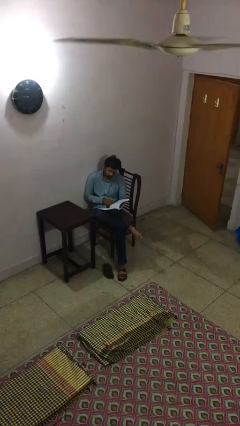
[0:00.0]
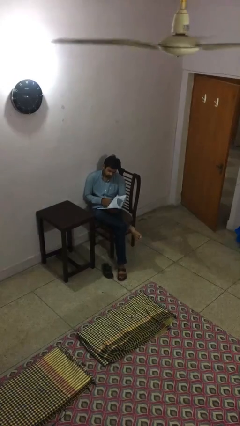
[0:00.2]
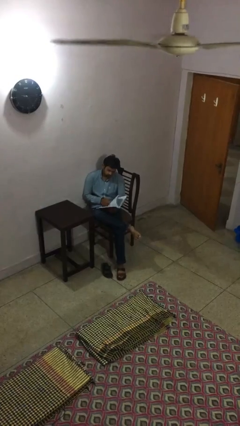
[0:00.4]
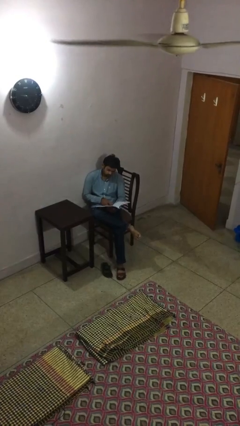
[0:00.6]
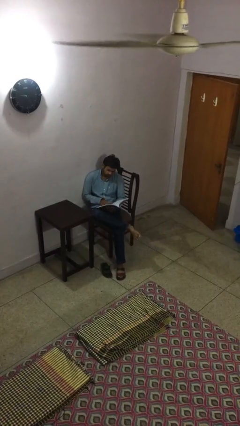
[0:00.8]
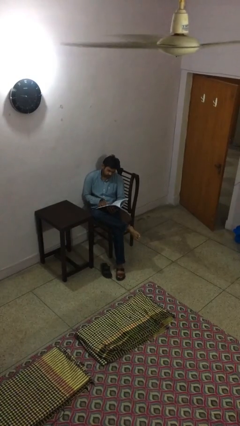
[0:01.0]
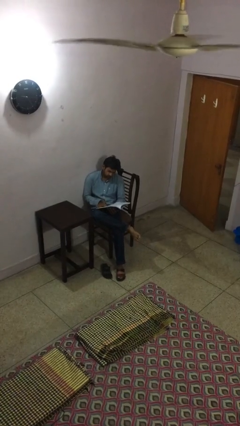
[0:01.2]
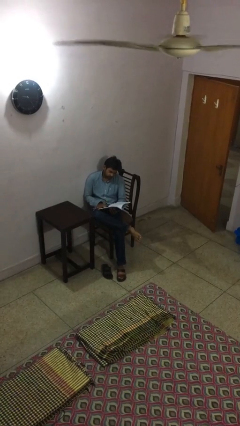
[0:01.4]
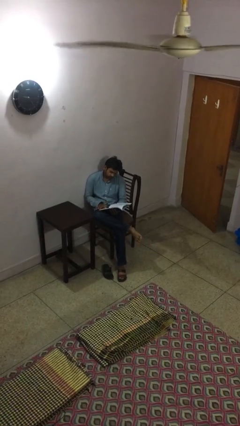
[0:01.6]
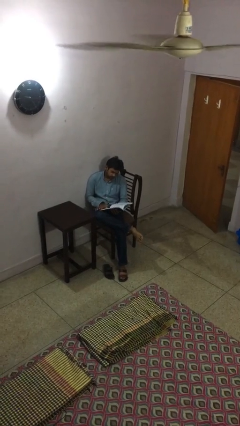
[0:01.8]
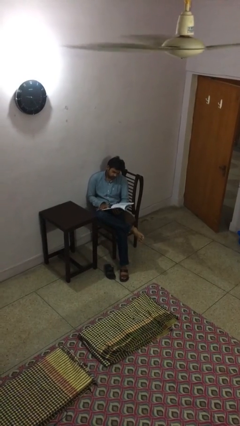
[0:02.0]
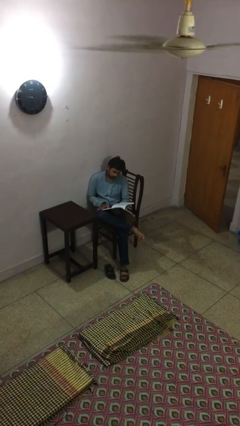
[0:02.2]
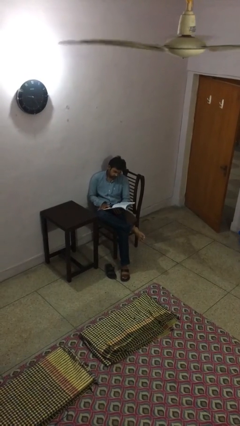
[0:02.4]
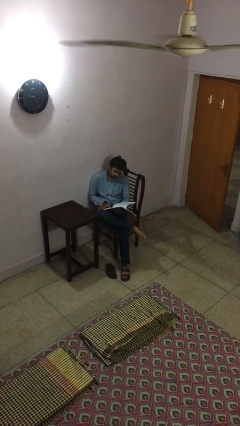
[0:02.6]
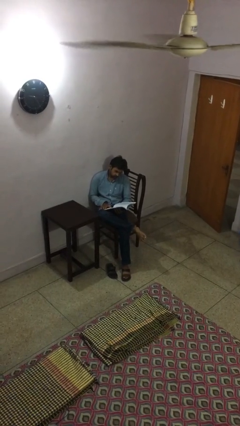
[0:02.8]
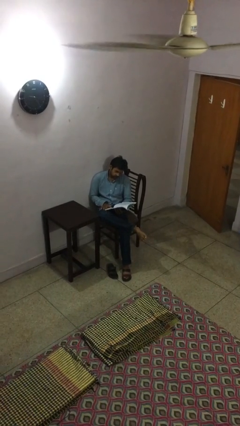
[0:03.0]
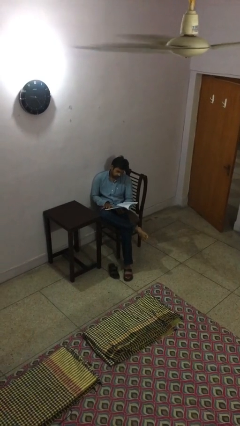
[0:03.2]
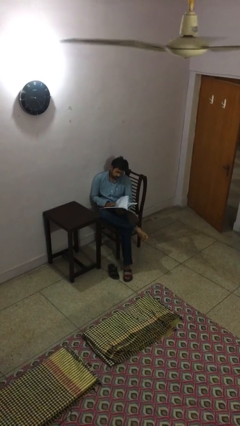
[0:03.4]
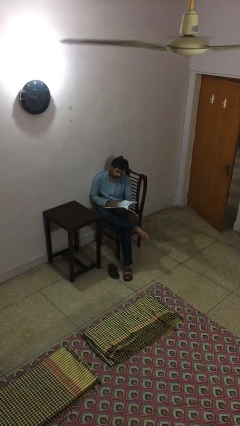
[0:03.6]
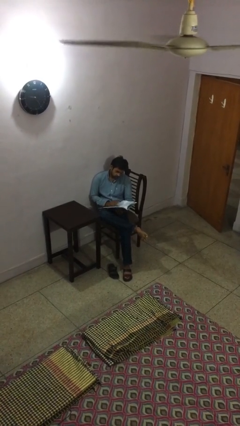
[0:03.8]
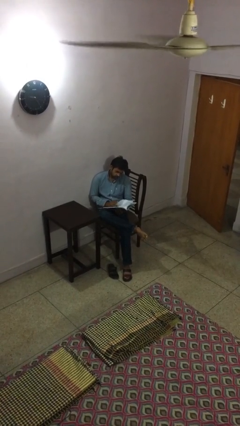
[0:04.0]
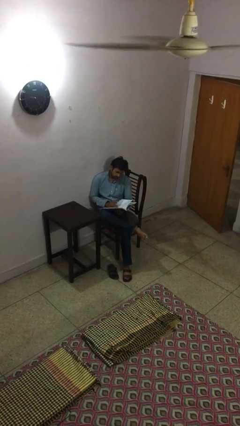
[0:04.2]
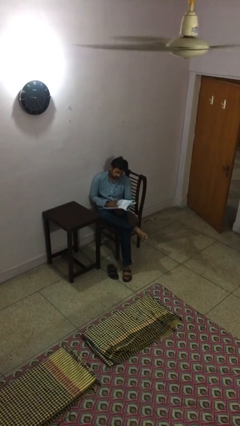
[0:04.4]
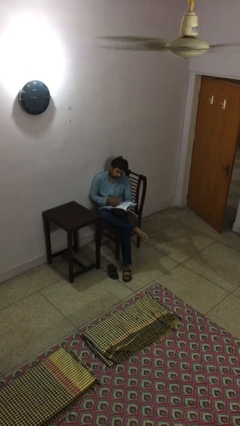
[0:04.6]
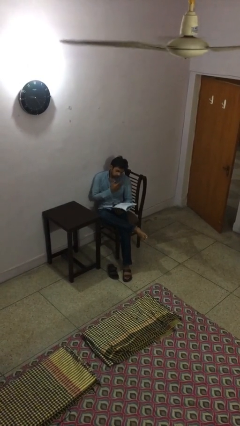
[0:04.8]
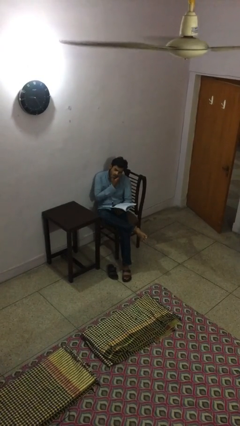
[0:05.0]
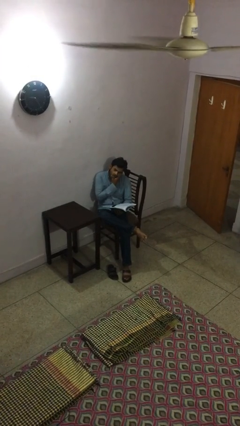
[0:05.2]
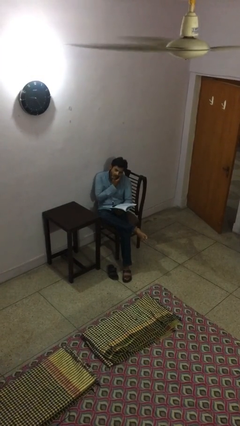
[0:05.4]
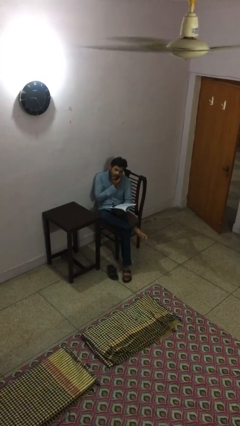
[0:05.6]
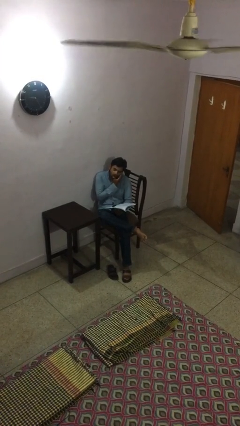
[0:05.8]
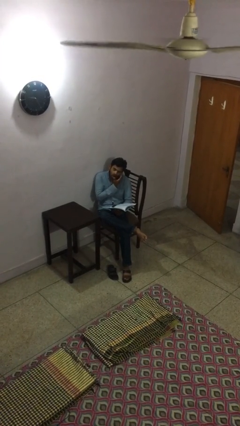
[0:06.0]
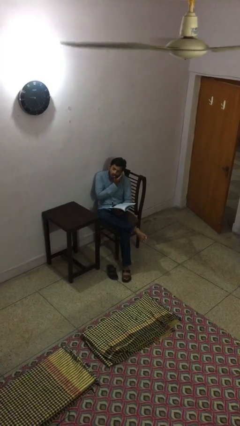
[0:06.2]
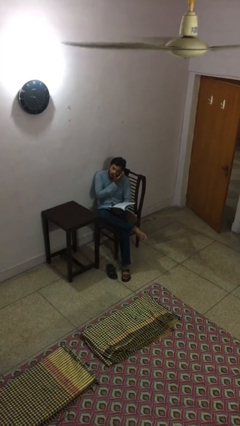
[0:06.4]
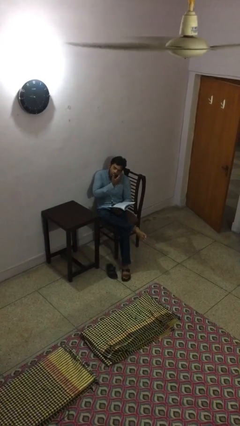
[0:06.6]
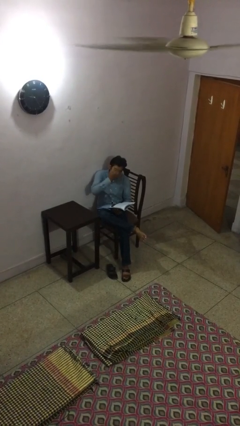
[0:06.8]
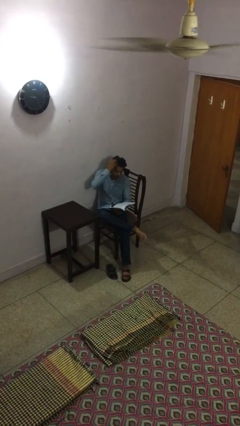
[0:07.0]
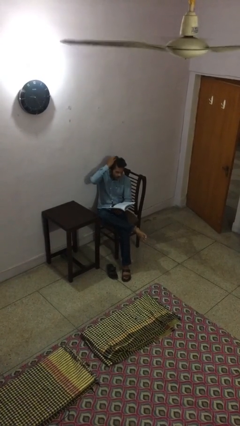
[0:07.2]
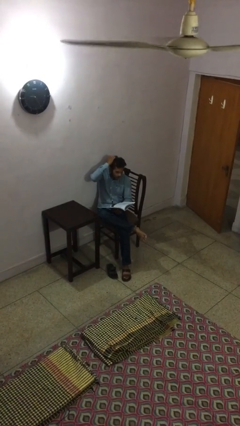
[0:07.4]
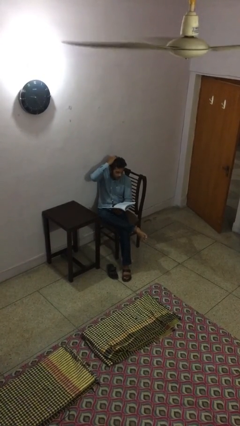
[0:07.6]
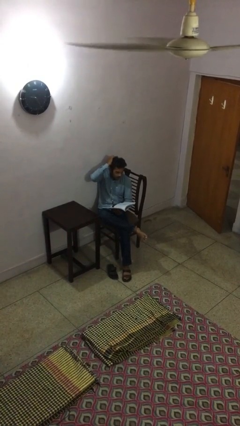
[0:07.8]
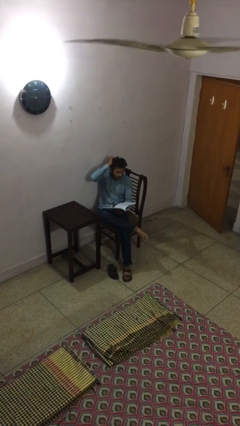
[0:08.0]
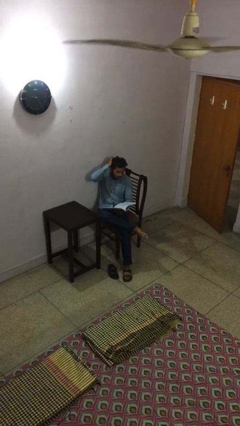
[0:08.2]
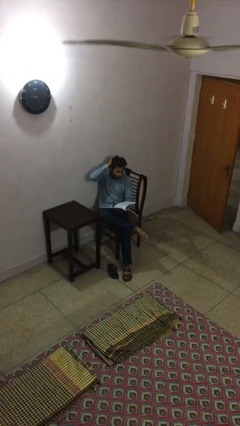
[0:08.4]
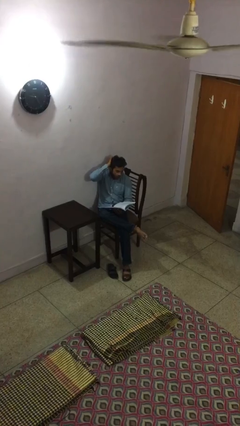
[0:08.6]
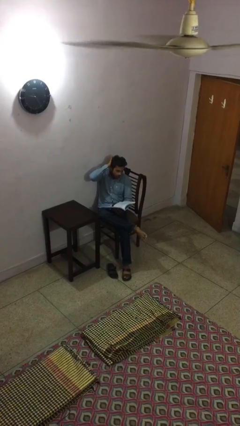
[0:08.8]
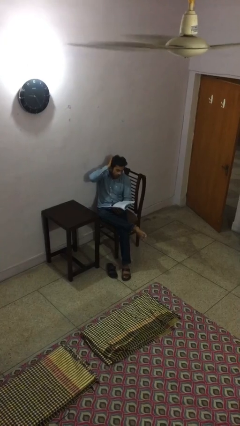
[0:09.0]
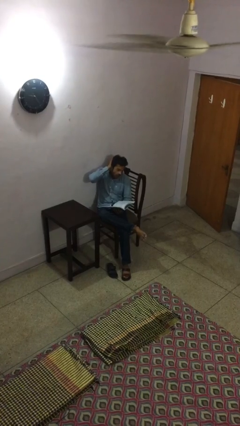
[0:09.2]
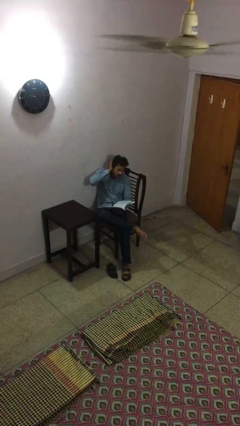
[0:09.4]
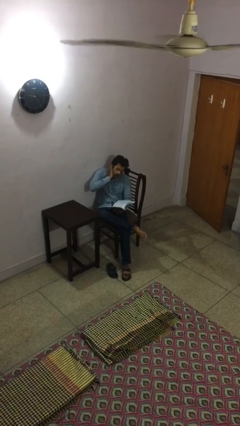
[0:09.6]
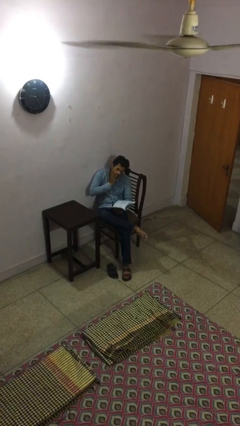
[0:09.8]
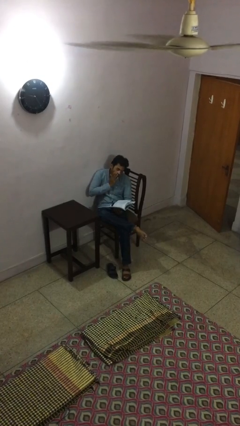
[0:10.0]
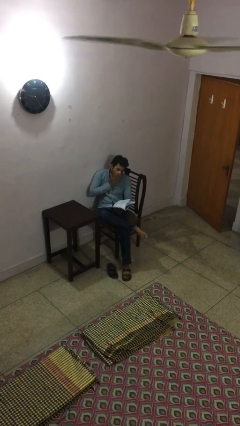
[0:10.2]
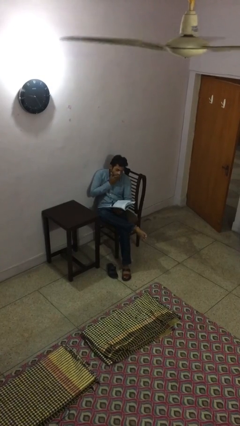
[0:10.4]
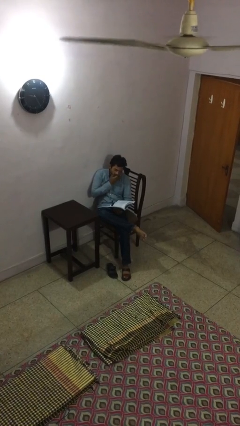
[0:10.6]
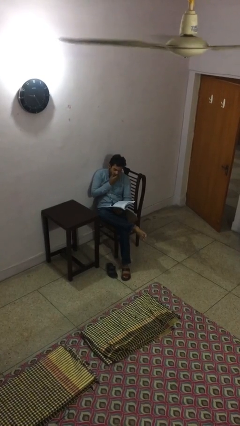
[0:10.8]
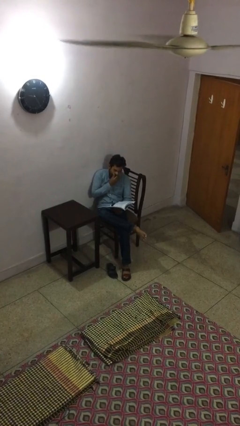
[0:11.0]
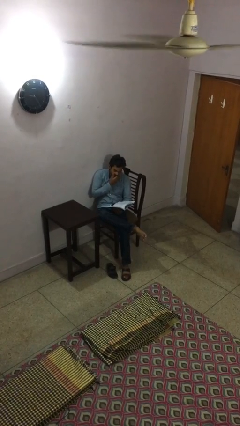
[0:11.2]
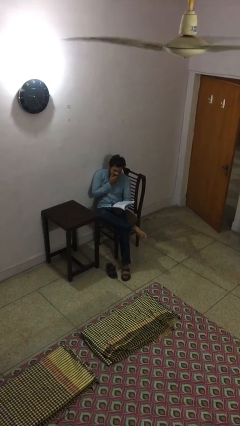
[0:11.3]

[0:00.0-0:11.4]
person reads document

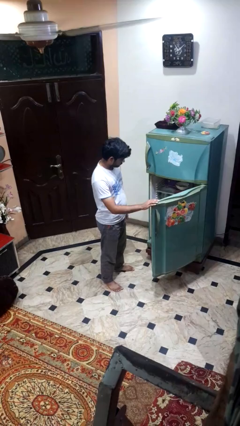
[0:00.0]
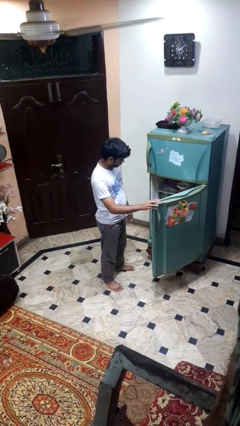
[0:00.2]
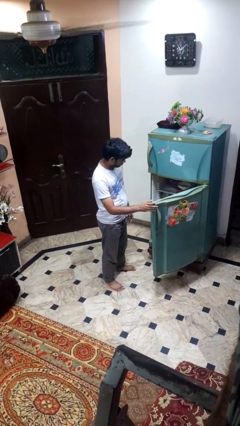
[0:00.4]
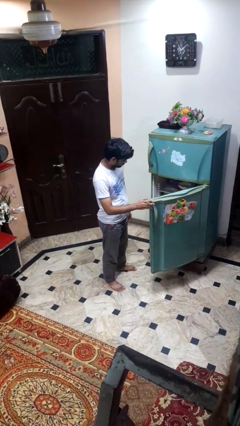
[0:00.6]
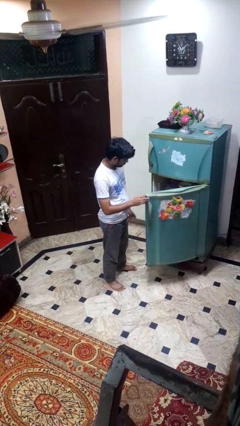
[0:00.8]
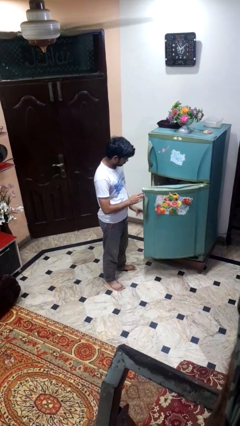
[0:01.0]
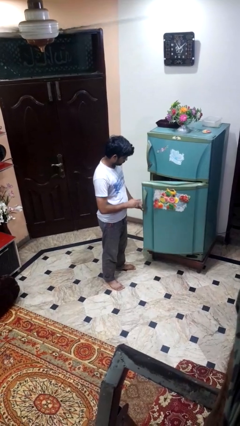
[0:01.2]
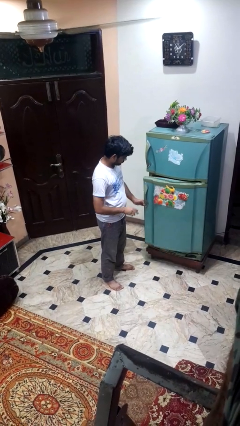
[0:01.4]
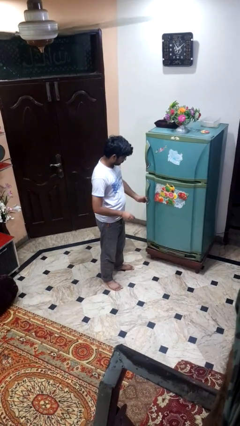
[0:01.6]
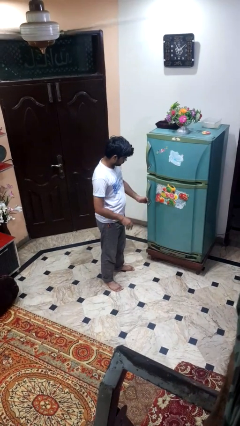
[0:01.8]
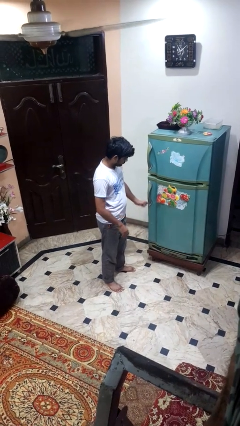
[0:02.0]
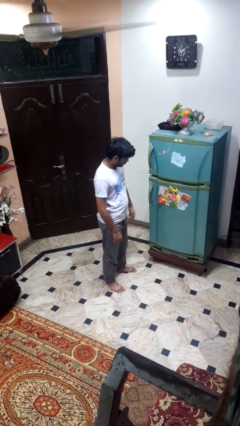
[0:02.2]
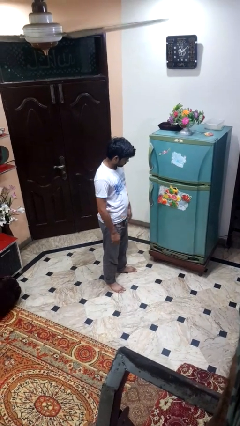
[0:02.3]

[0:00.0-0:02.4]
person closes refrigerator

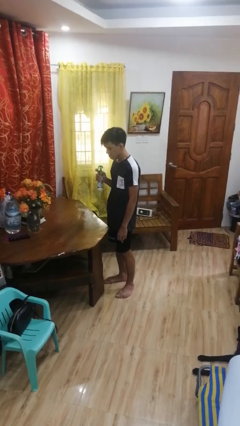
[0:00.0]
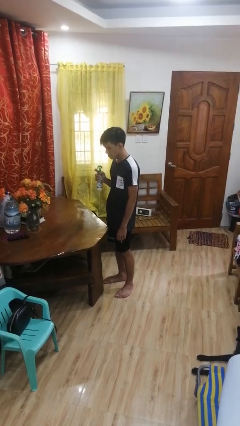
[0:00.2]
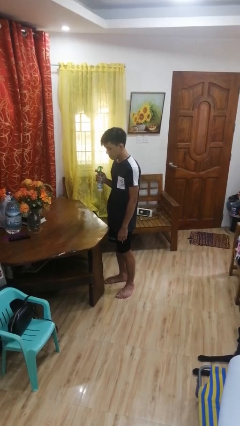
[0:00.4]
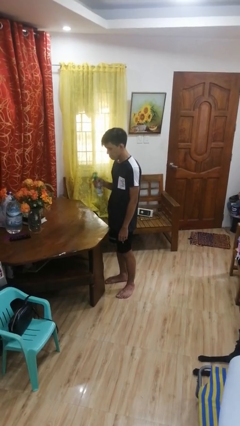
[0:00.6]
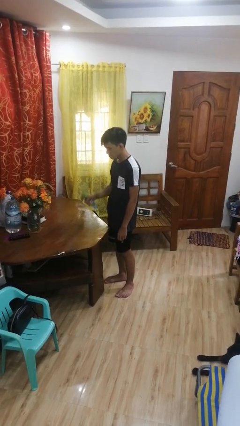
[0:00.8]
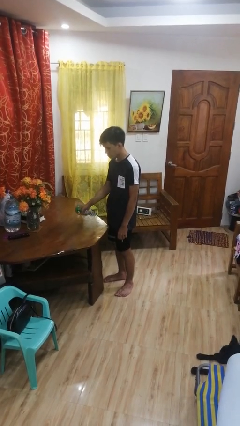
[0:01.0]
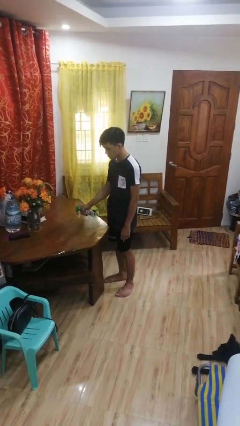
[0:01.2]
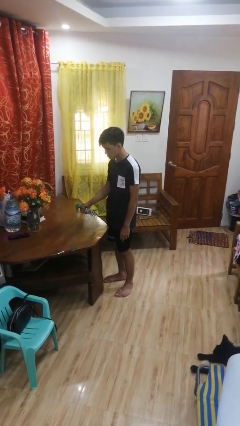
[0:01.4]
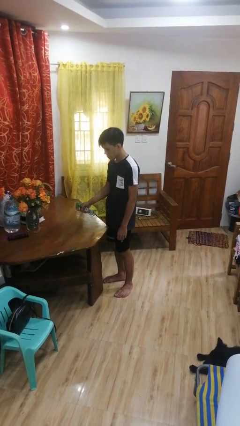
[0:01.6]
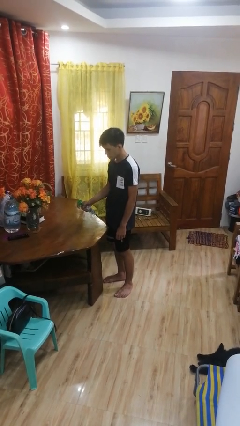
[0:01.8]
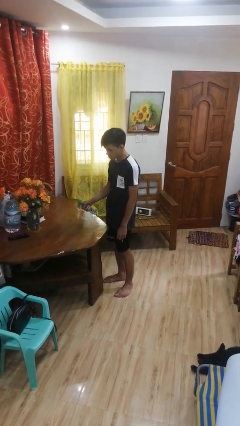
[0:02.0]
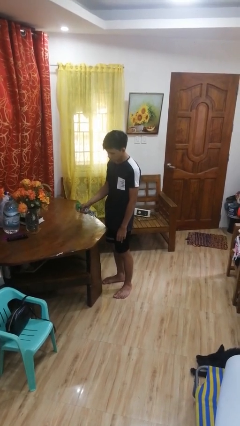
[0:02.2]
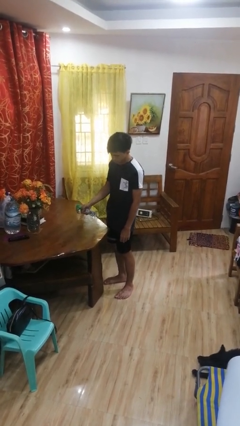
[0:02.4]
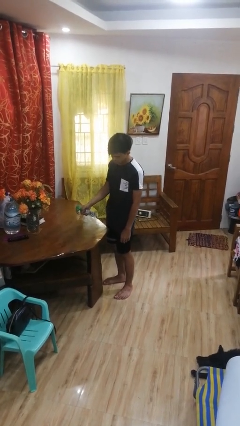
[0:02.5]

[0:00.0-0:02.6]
person sprays from bottle

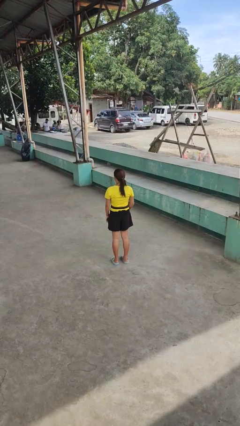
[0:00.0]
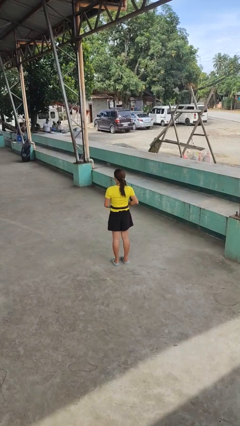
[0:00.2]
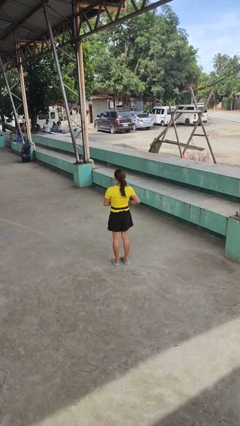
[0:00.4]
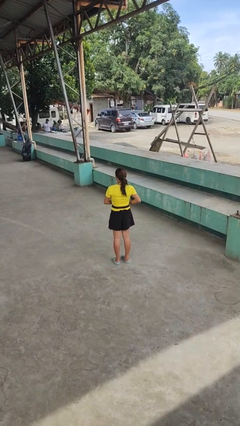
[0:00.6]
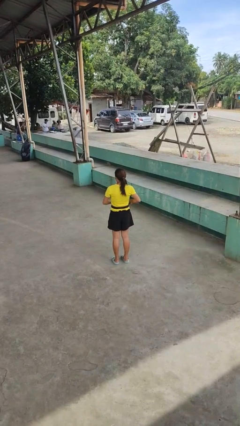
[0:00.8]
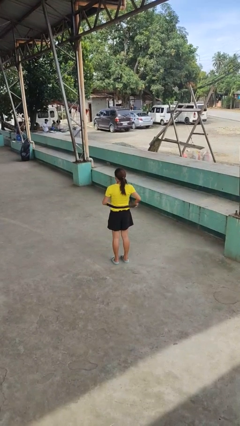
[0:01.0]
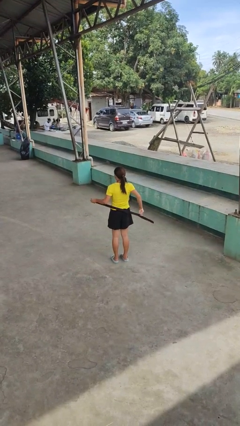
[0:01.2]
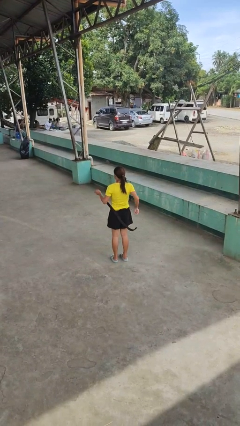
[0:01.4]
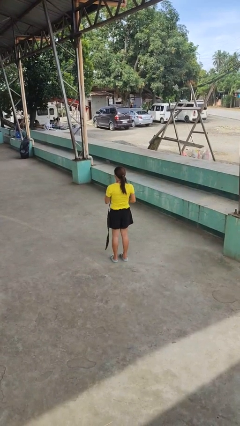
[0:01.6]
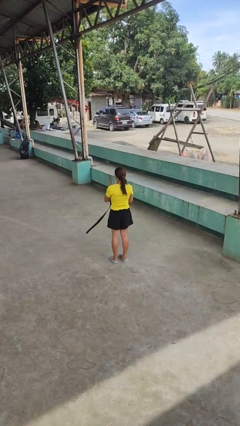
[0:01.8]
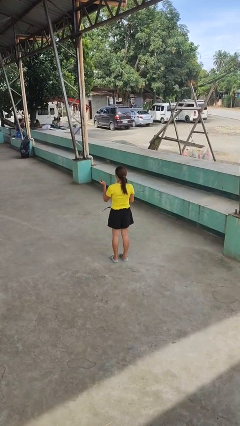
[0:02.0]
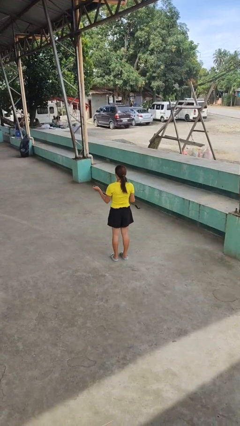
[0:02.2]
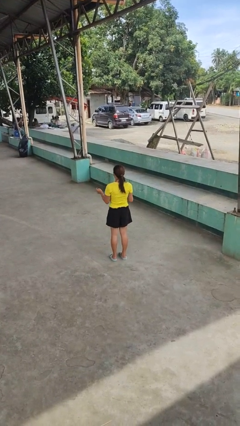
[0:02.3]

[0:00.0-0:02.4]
person takes off belt
